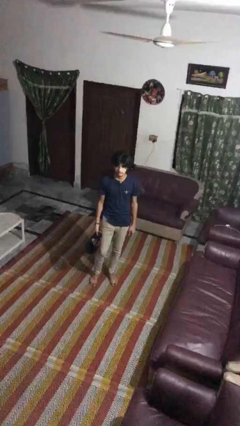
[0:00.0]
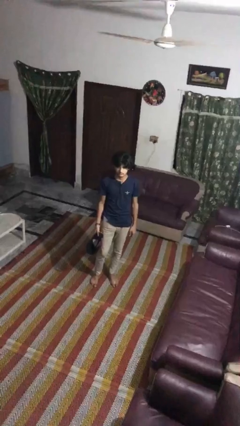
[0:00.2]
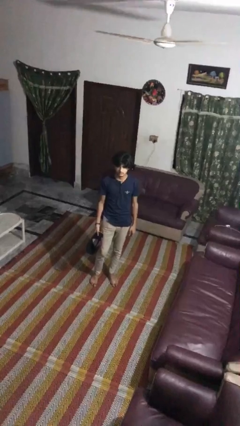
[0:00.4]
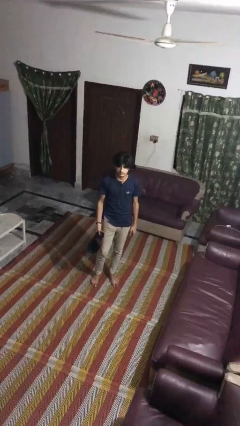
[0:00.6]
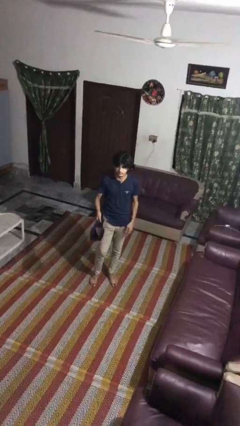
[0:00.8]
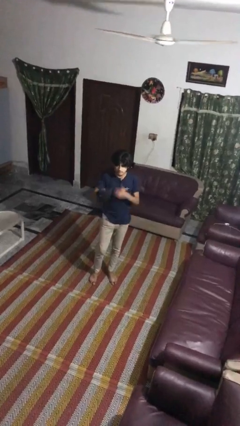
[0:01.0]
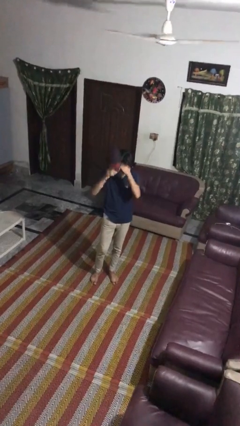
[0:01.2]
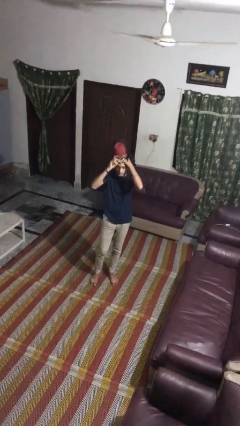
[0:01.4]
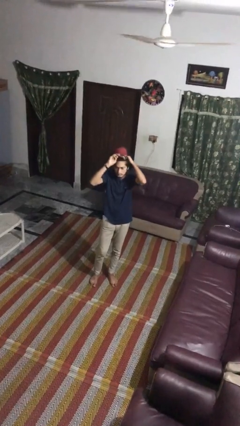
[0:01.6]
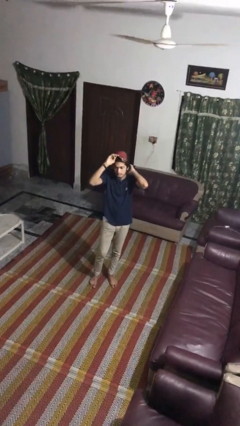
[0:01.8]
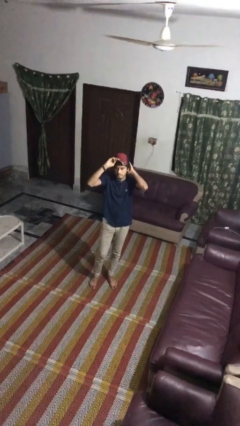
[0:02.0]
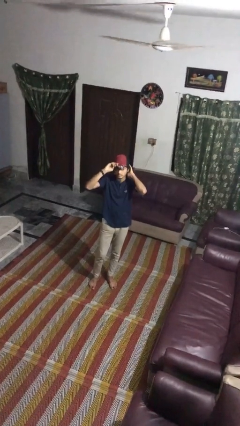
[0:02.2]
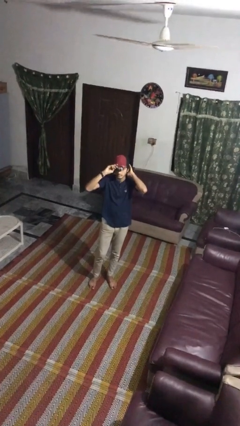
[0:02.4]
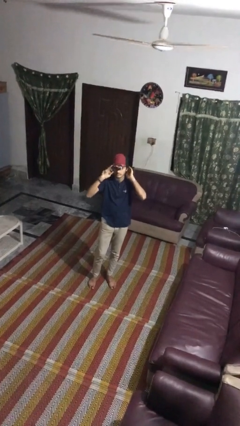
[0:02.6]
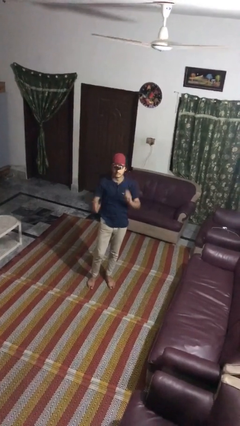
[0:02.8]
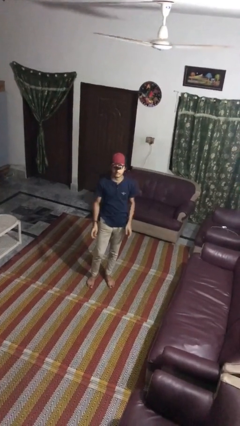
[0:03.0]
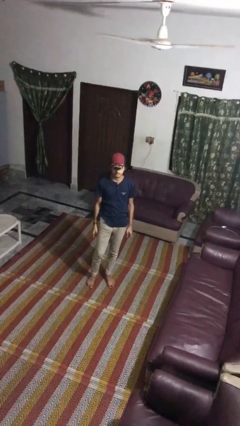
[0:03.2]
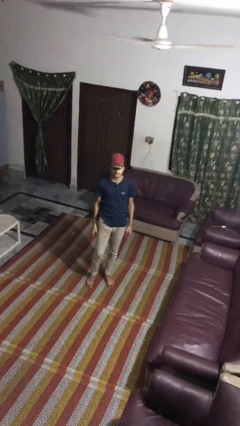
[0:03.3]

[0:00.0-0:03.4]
person puts on hat

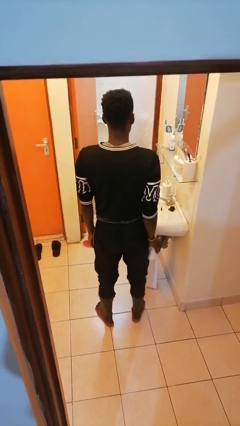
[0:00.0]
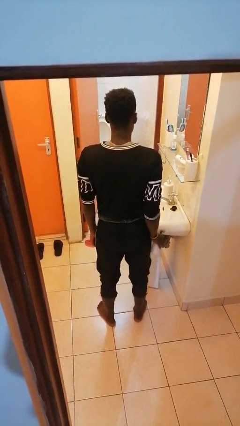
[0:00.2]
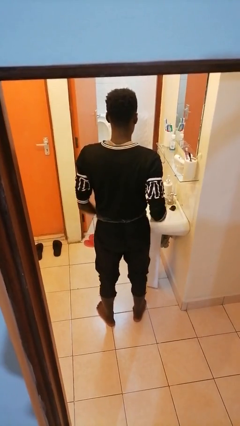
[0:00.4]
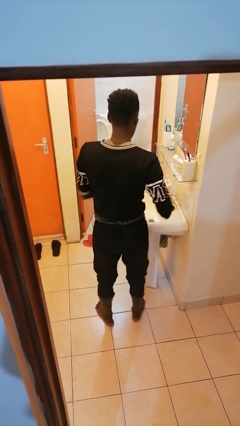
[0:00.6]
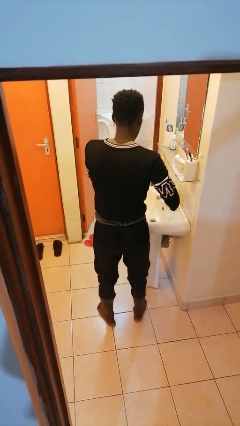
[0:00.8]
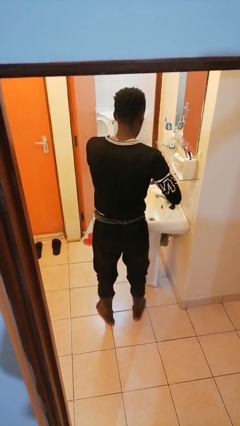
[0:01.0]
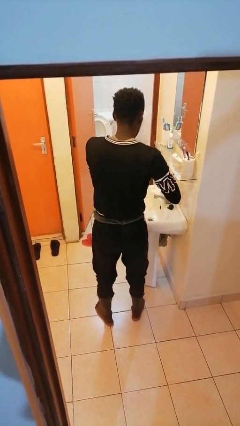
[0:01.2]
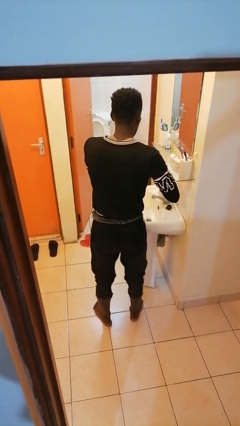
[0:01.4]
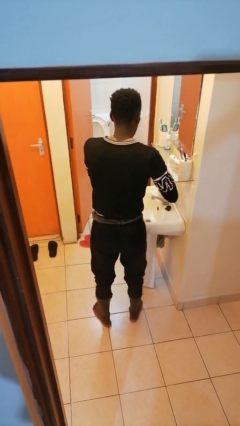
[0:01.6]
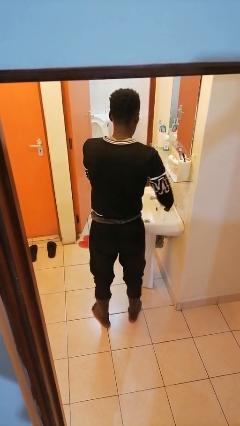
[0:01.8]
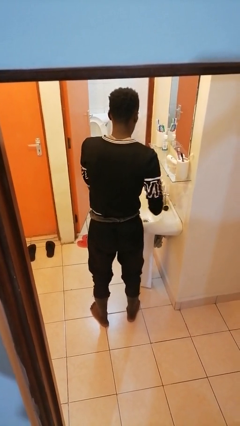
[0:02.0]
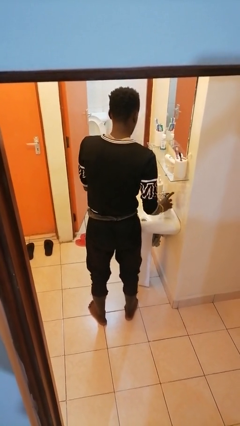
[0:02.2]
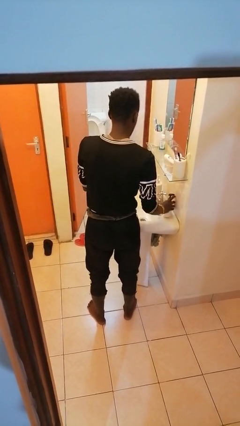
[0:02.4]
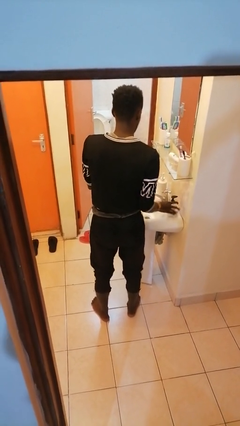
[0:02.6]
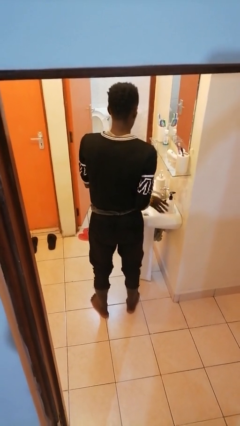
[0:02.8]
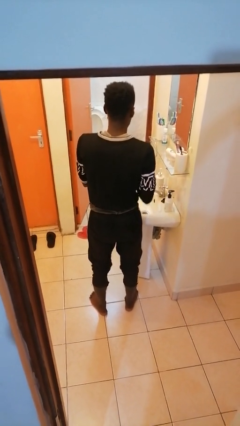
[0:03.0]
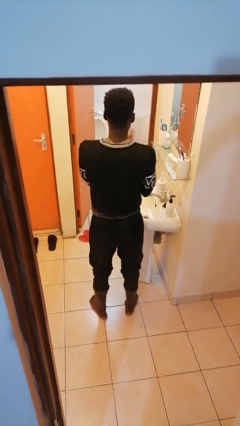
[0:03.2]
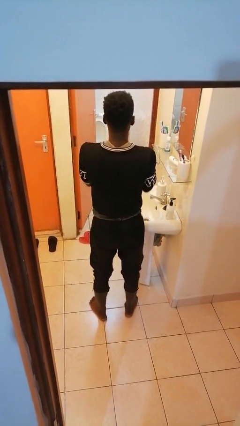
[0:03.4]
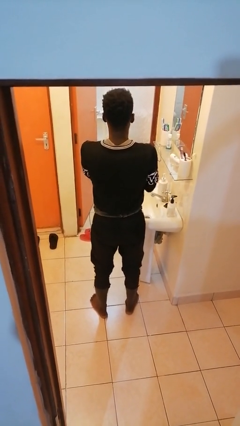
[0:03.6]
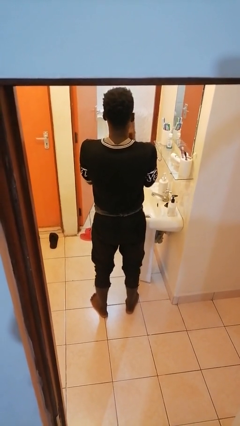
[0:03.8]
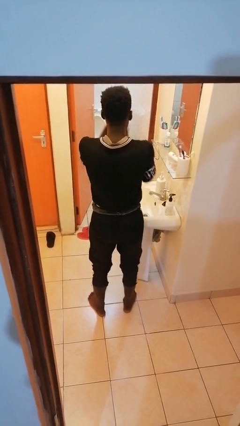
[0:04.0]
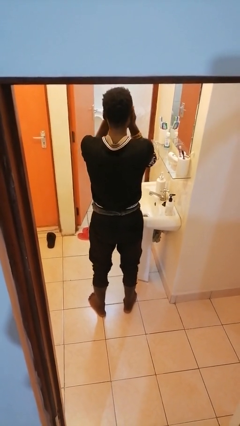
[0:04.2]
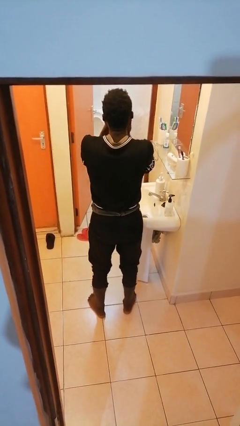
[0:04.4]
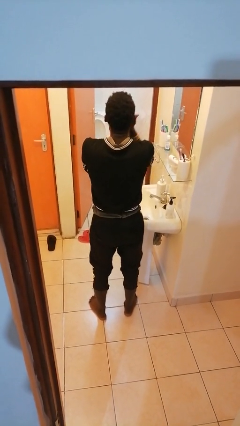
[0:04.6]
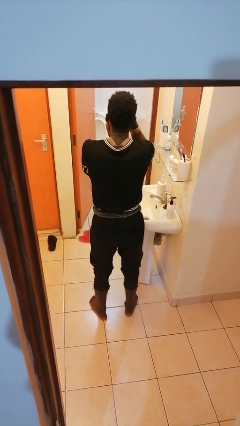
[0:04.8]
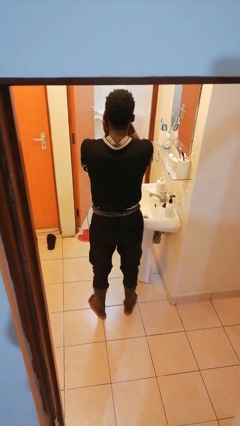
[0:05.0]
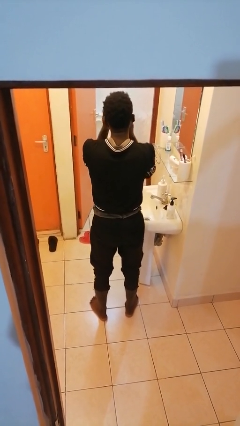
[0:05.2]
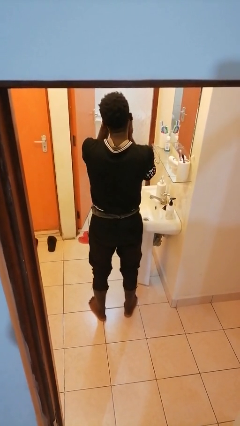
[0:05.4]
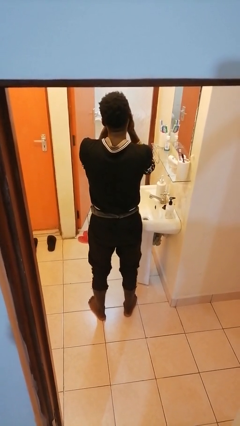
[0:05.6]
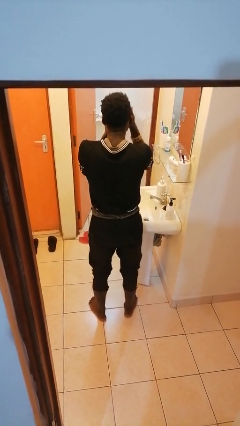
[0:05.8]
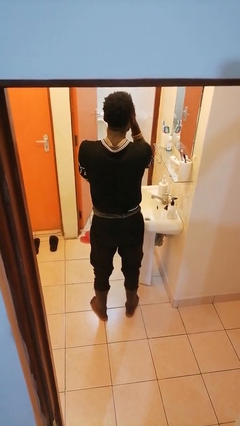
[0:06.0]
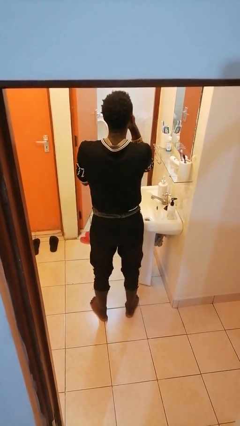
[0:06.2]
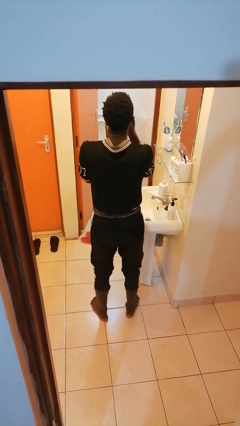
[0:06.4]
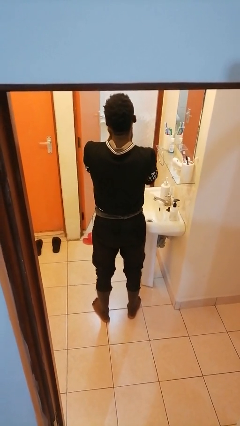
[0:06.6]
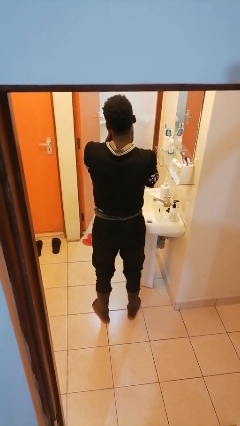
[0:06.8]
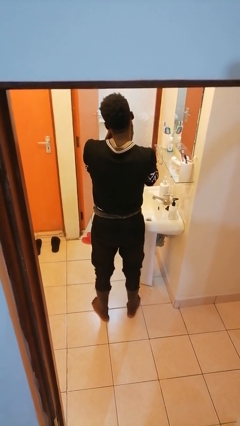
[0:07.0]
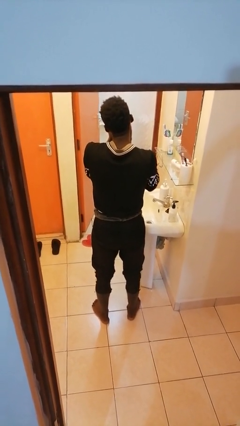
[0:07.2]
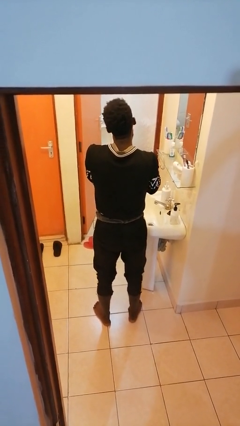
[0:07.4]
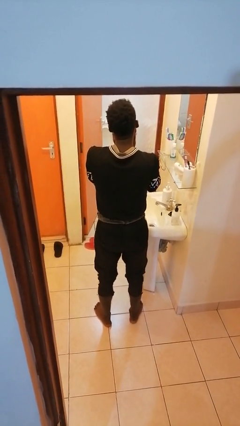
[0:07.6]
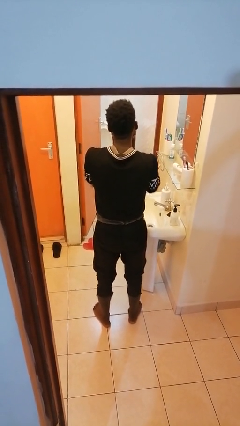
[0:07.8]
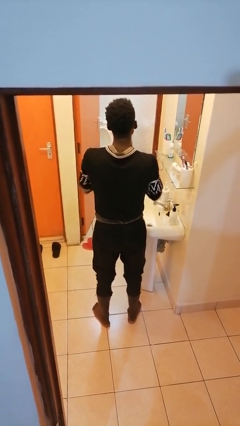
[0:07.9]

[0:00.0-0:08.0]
person applies facial moisturizer

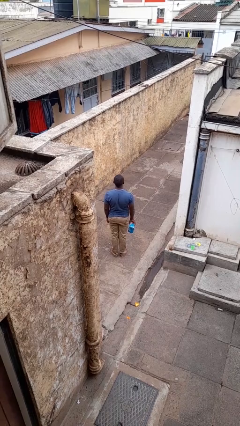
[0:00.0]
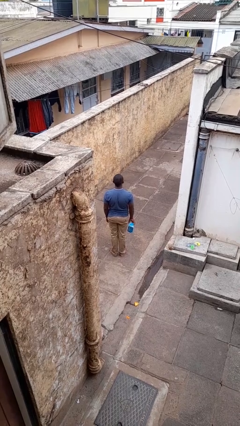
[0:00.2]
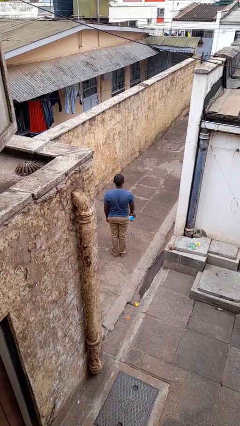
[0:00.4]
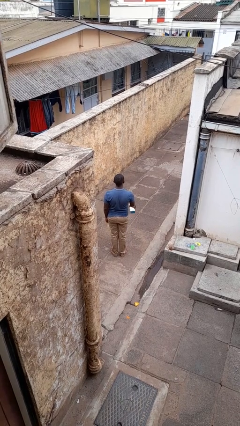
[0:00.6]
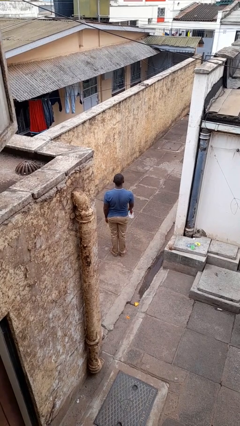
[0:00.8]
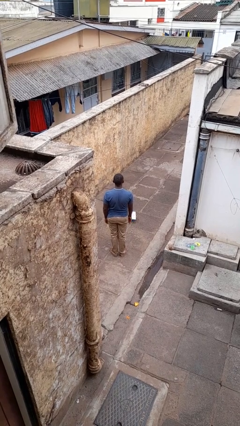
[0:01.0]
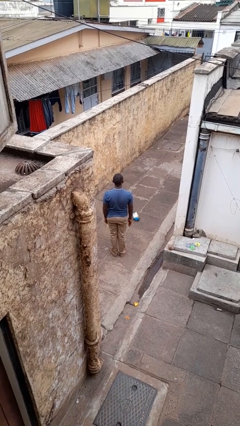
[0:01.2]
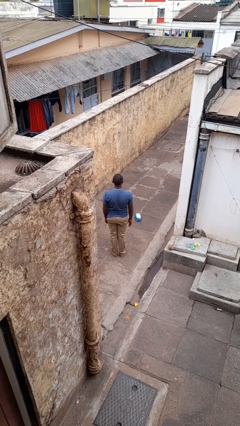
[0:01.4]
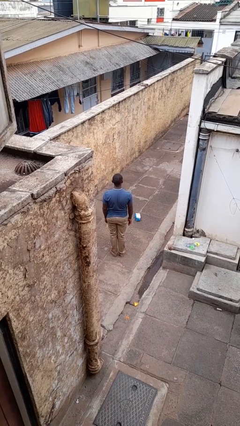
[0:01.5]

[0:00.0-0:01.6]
person throws object to ground

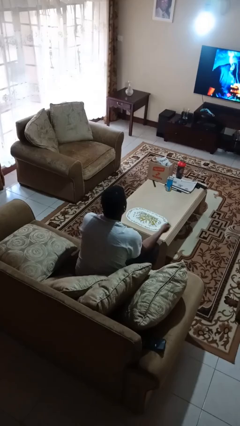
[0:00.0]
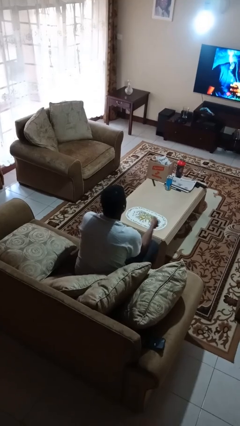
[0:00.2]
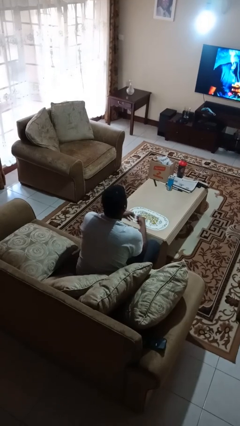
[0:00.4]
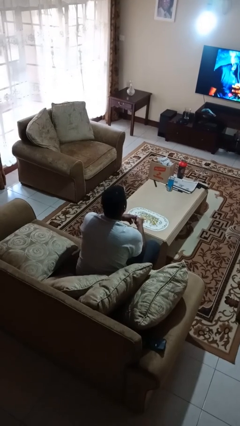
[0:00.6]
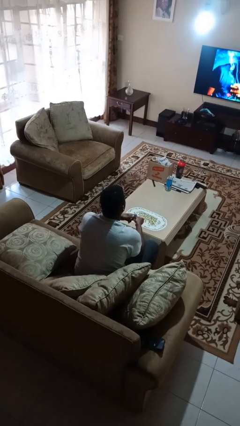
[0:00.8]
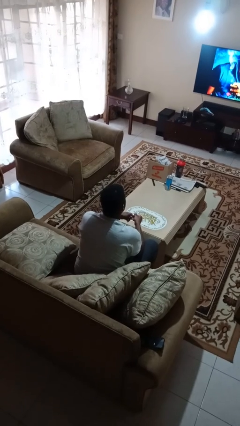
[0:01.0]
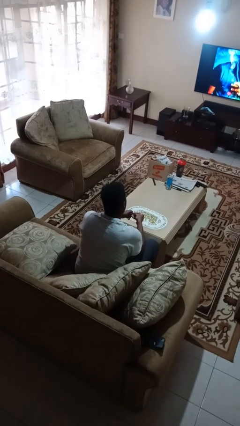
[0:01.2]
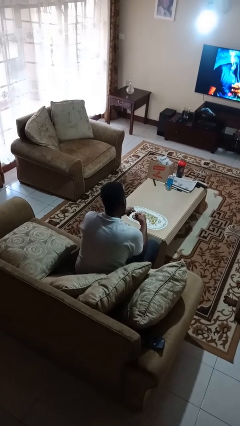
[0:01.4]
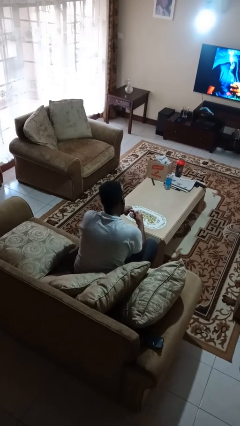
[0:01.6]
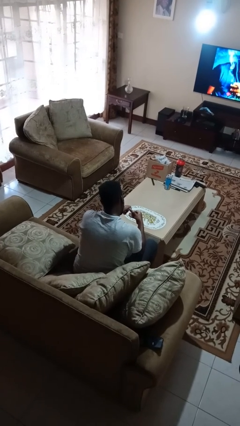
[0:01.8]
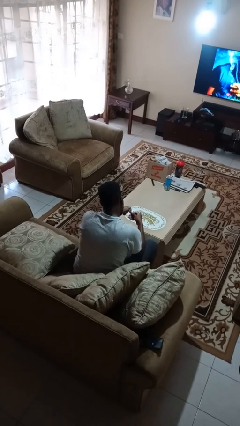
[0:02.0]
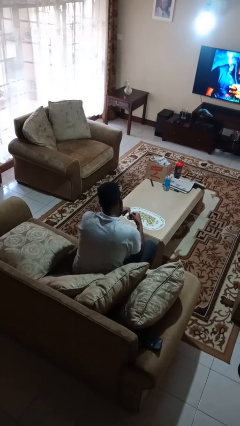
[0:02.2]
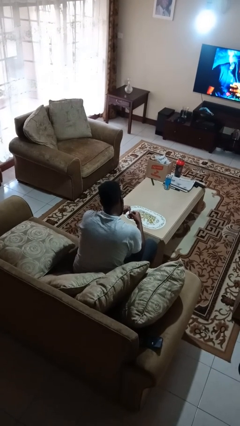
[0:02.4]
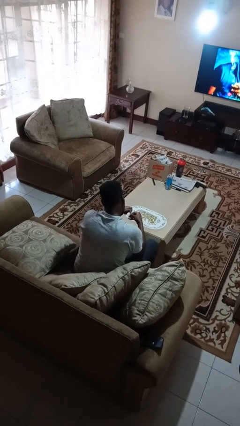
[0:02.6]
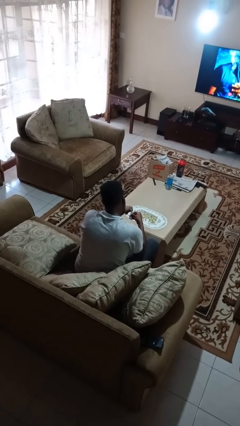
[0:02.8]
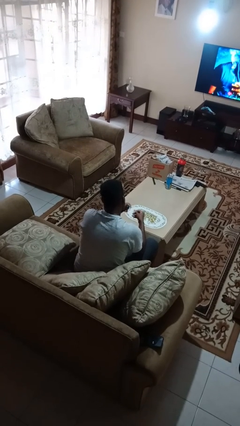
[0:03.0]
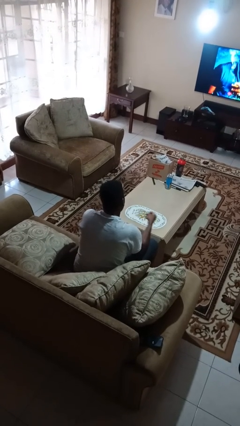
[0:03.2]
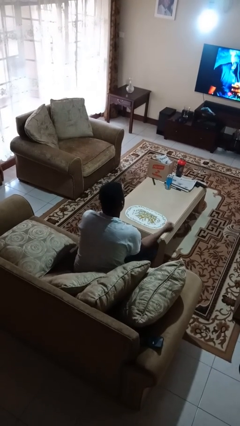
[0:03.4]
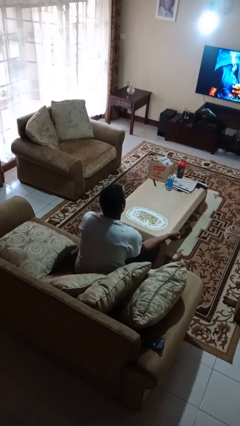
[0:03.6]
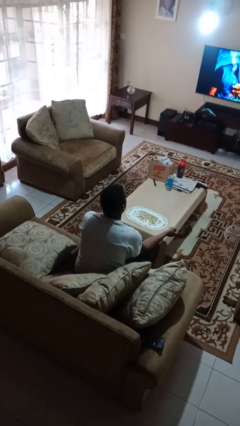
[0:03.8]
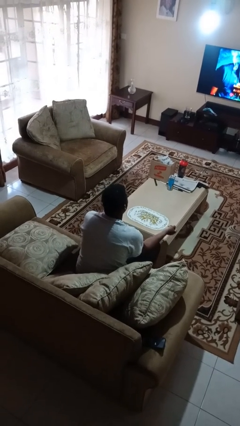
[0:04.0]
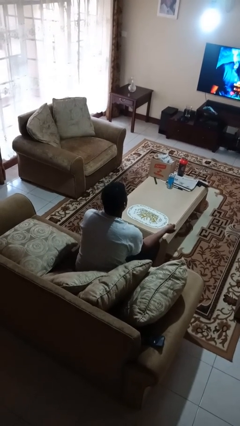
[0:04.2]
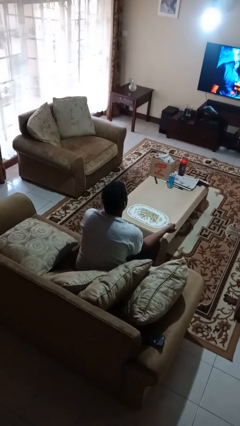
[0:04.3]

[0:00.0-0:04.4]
person clips fingernails

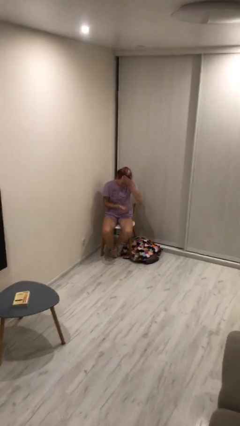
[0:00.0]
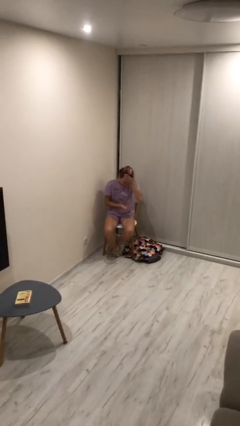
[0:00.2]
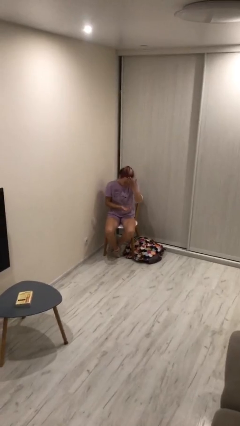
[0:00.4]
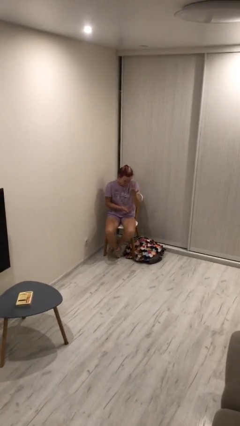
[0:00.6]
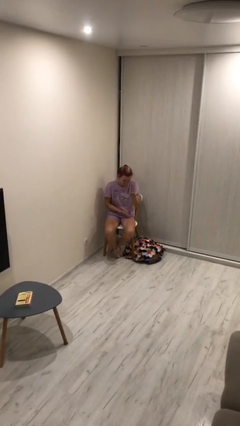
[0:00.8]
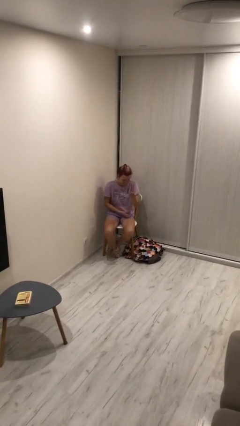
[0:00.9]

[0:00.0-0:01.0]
person swats bug
